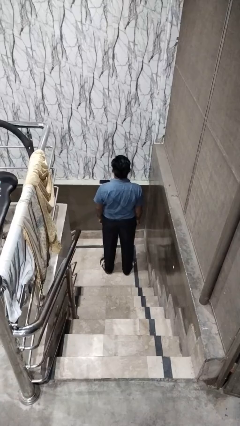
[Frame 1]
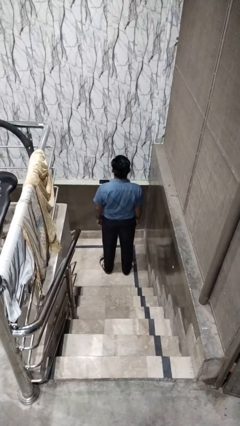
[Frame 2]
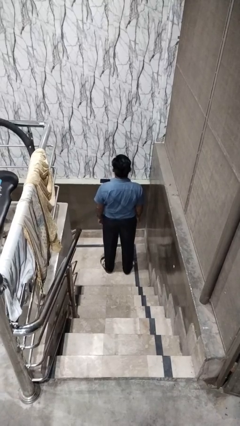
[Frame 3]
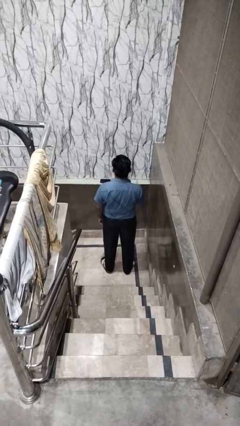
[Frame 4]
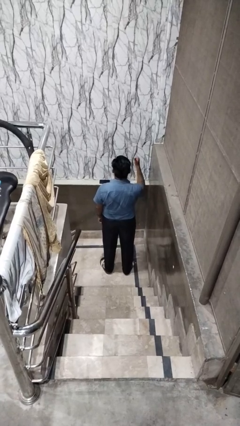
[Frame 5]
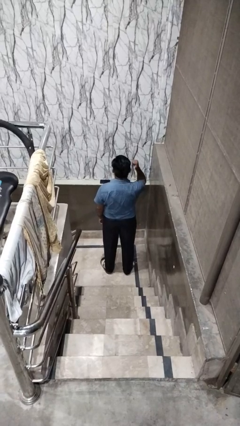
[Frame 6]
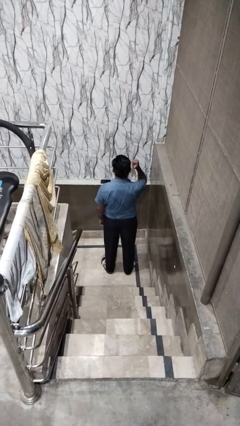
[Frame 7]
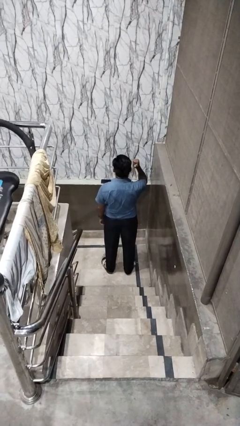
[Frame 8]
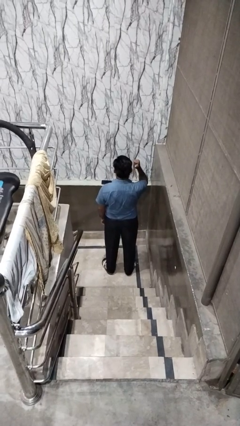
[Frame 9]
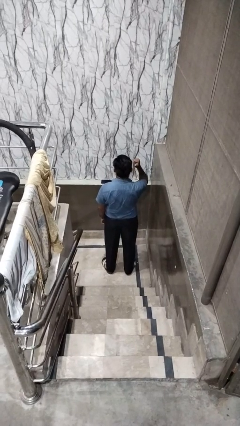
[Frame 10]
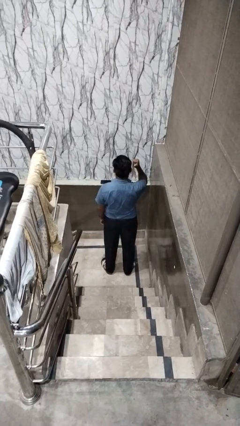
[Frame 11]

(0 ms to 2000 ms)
person gestures behind me

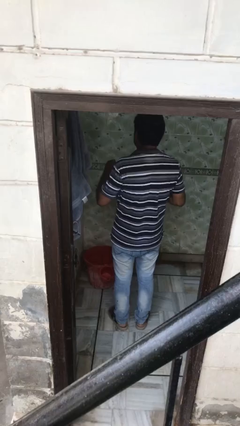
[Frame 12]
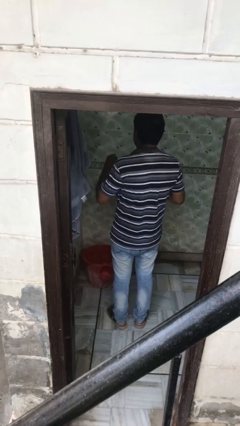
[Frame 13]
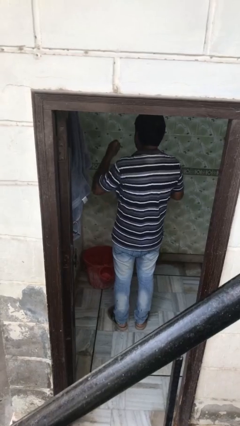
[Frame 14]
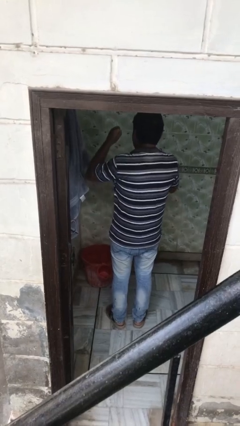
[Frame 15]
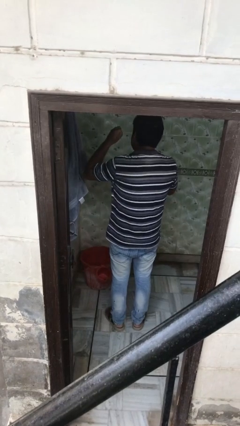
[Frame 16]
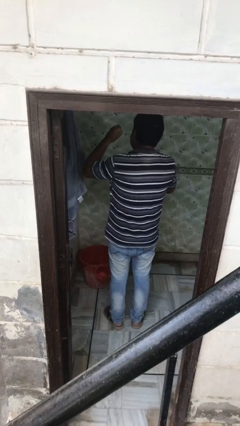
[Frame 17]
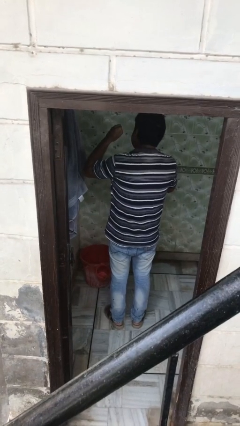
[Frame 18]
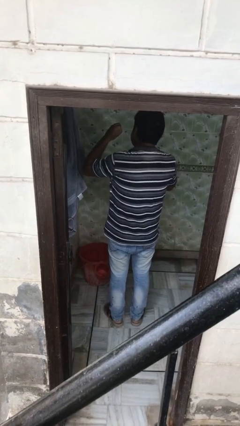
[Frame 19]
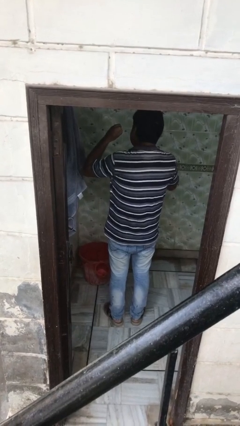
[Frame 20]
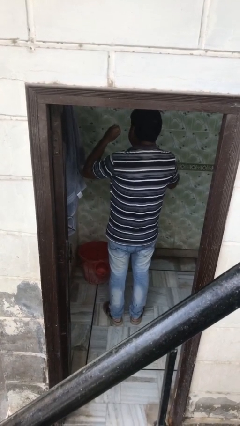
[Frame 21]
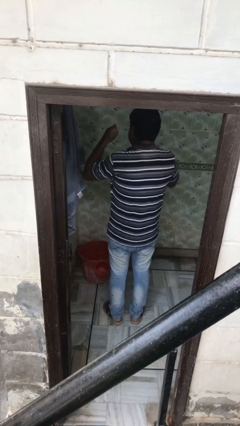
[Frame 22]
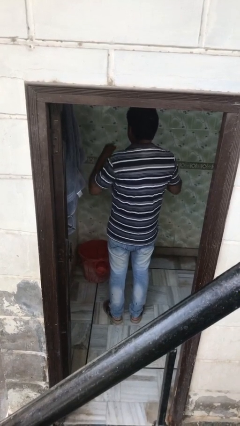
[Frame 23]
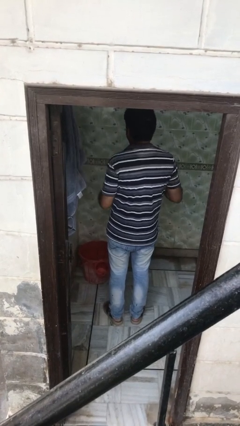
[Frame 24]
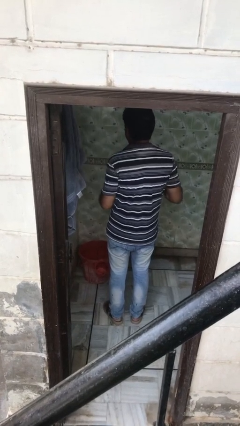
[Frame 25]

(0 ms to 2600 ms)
person flosses

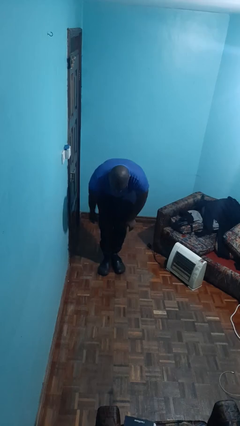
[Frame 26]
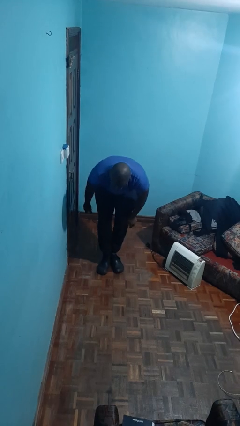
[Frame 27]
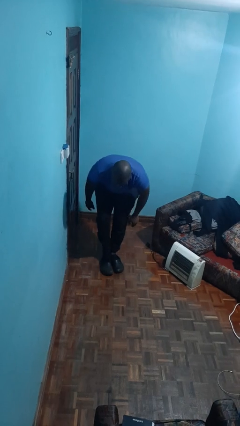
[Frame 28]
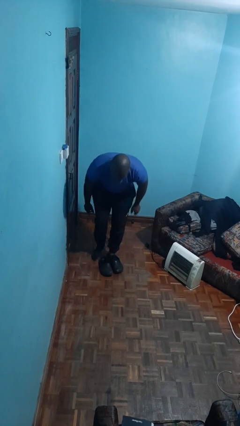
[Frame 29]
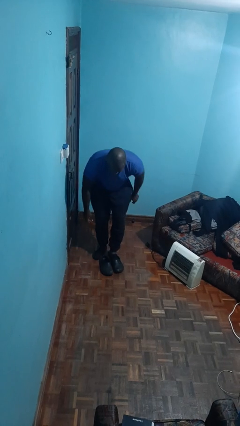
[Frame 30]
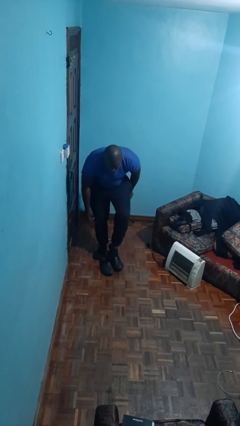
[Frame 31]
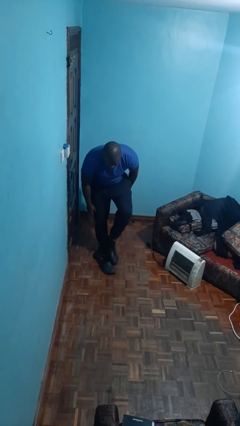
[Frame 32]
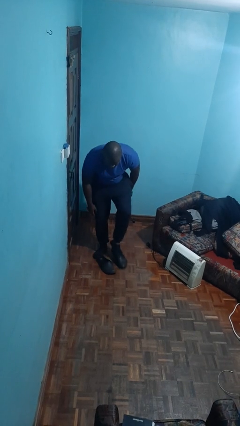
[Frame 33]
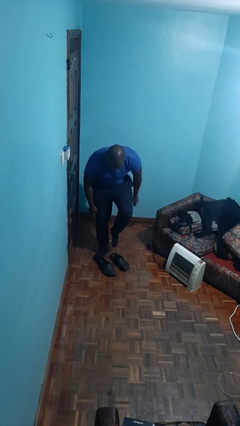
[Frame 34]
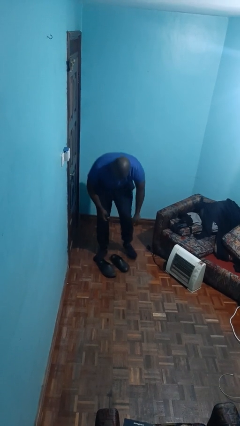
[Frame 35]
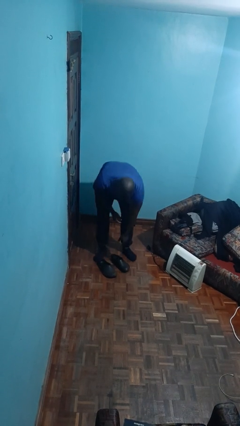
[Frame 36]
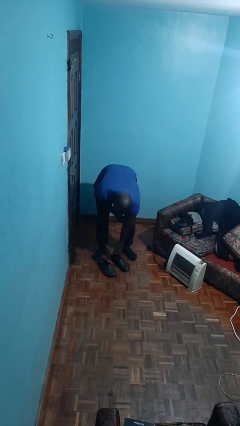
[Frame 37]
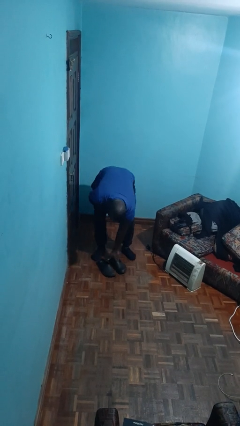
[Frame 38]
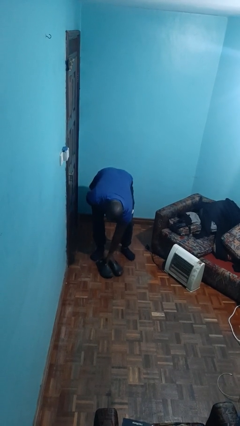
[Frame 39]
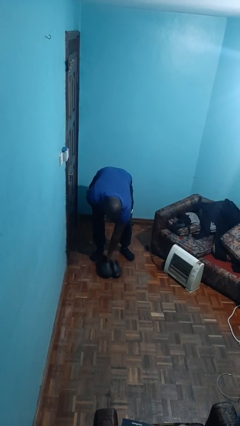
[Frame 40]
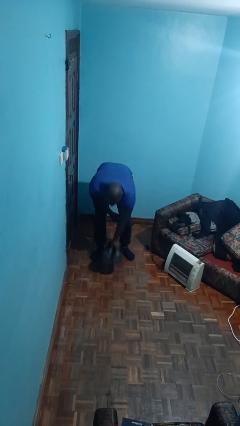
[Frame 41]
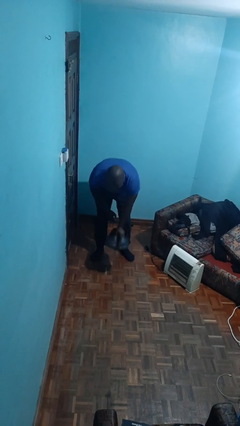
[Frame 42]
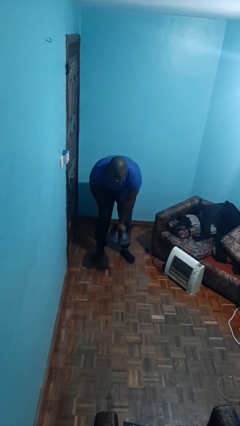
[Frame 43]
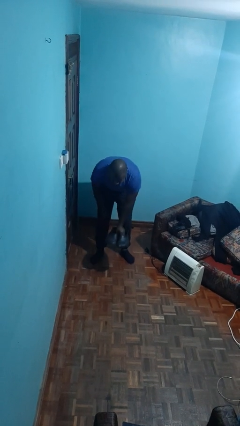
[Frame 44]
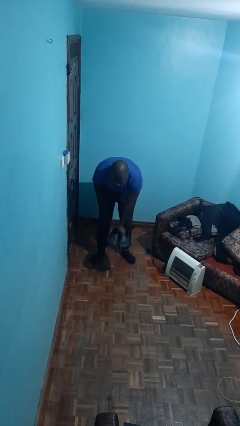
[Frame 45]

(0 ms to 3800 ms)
person takes off shoes

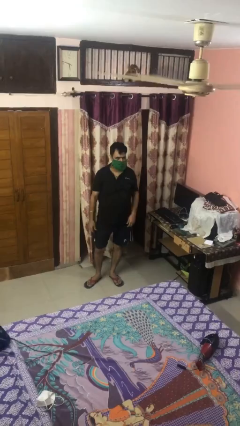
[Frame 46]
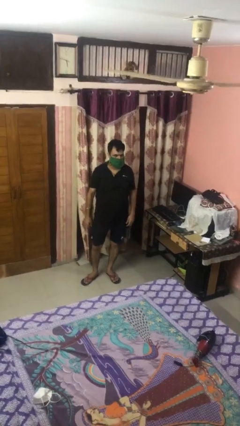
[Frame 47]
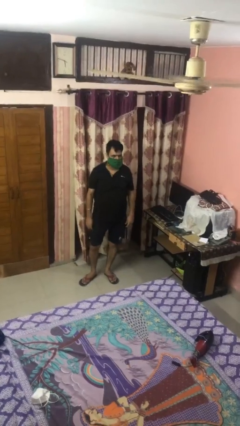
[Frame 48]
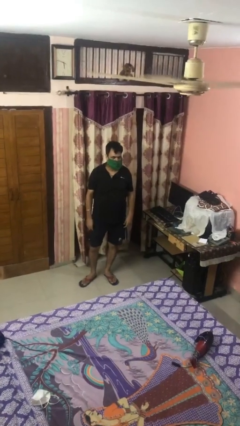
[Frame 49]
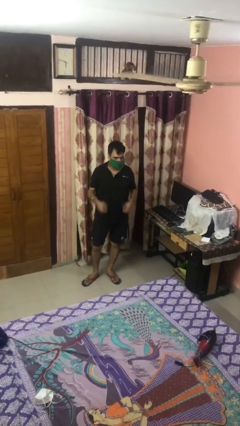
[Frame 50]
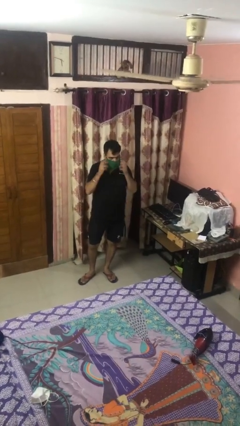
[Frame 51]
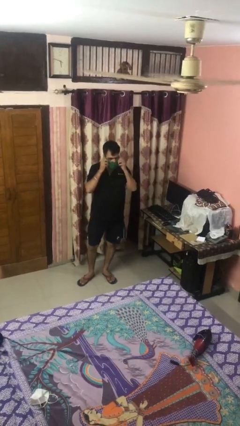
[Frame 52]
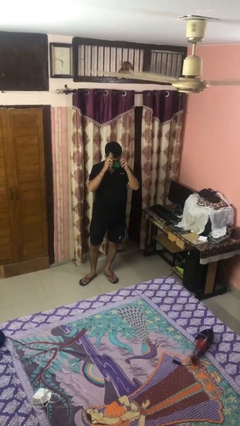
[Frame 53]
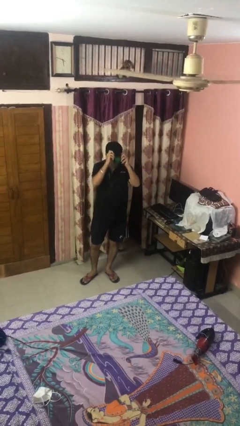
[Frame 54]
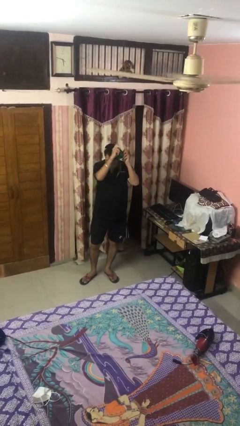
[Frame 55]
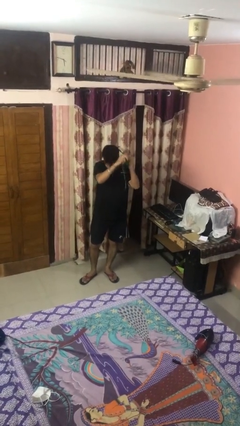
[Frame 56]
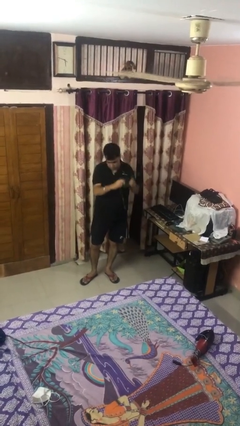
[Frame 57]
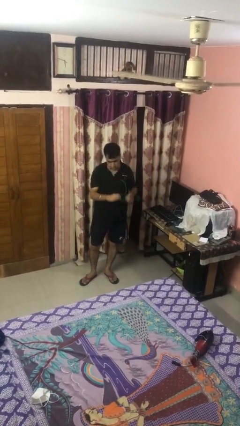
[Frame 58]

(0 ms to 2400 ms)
person takes off facemask

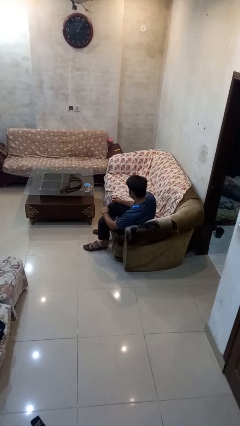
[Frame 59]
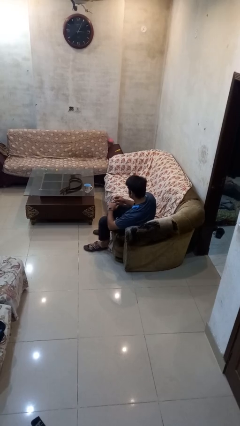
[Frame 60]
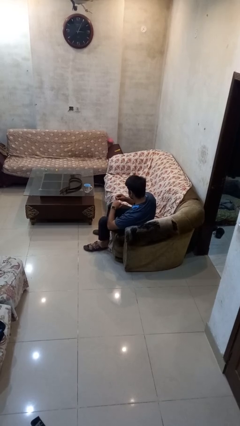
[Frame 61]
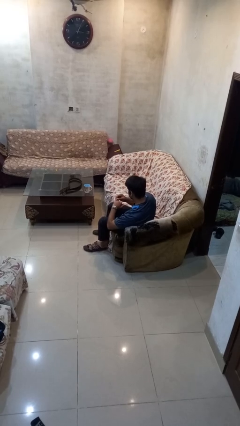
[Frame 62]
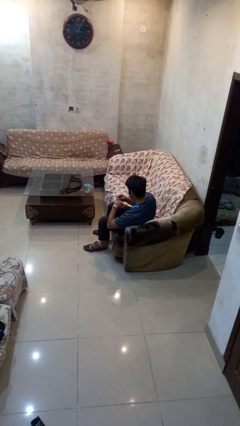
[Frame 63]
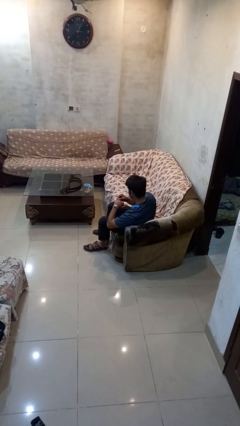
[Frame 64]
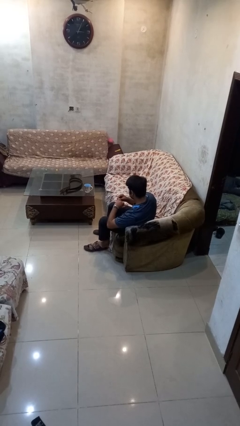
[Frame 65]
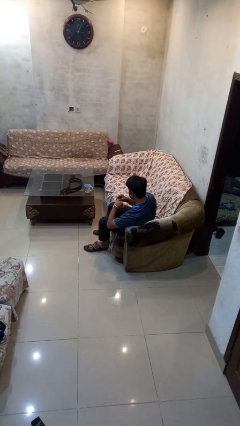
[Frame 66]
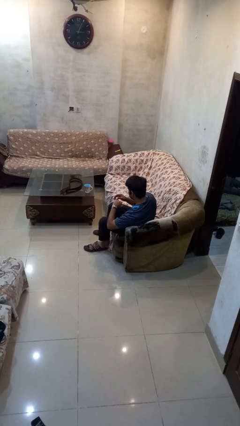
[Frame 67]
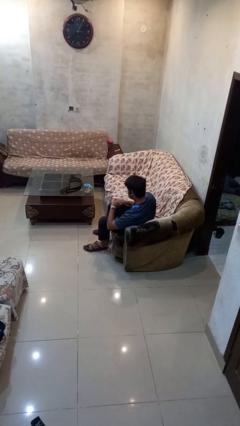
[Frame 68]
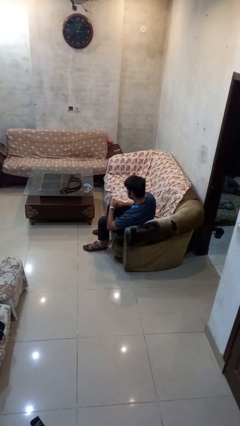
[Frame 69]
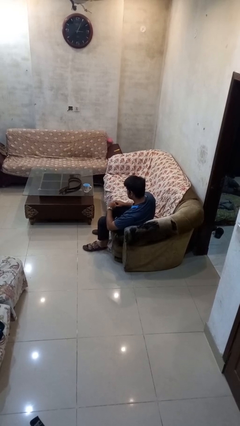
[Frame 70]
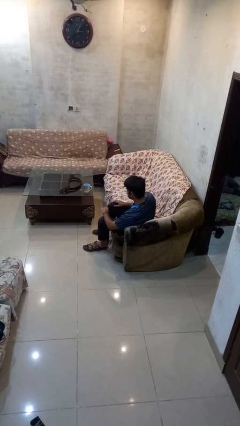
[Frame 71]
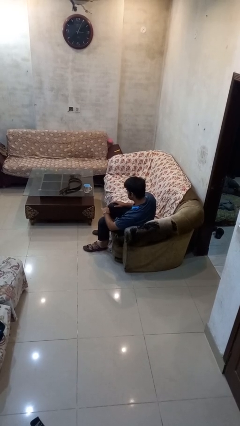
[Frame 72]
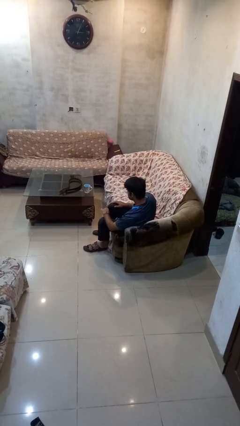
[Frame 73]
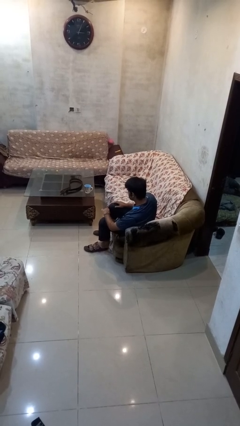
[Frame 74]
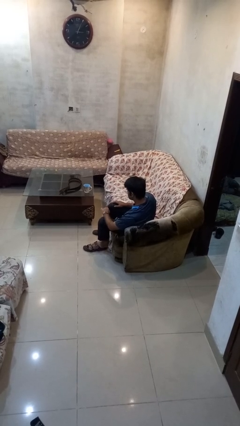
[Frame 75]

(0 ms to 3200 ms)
person puts on ring

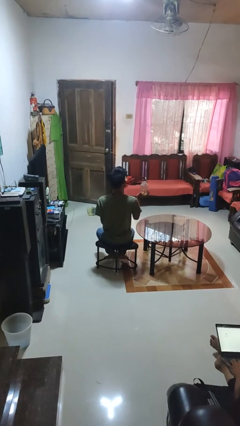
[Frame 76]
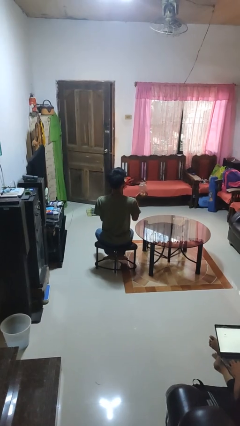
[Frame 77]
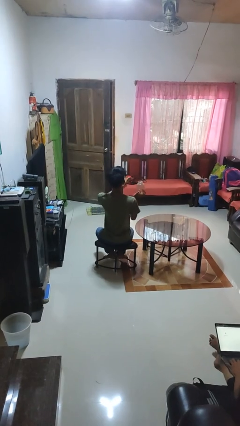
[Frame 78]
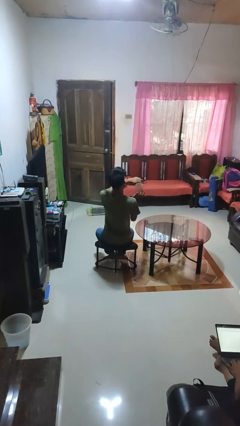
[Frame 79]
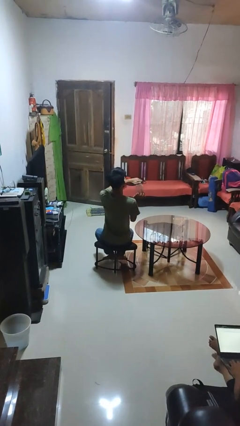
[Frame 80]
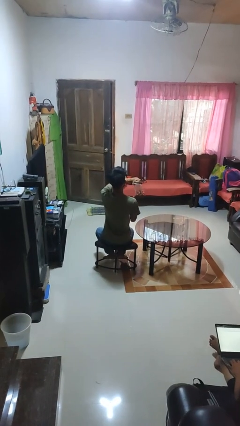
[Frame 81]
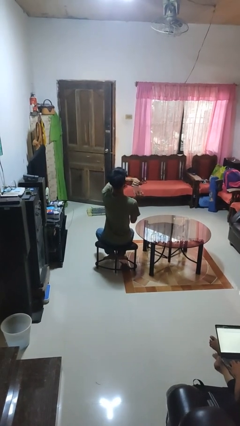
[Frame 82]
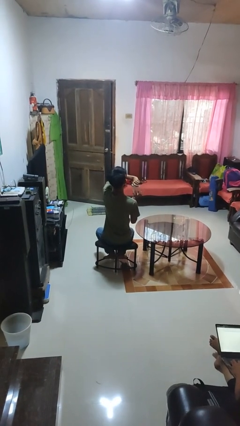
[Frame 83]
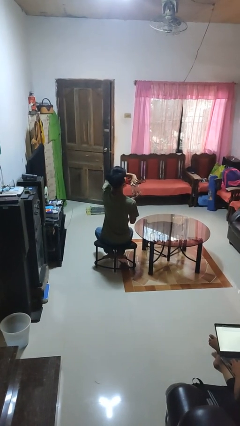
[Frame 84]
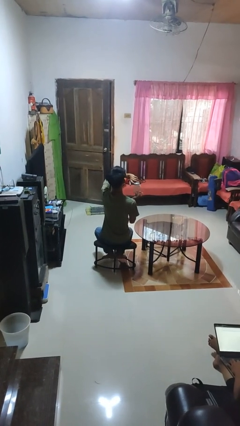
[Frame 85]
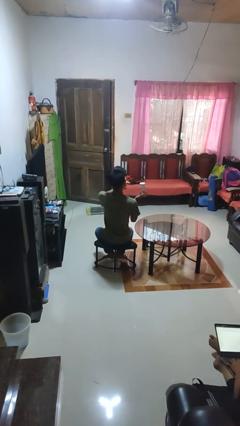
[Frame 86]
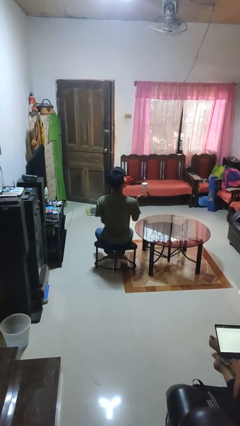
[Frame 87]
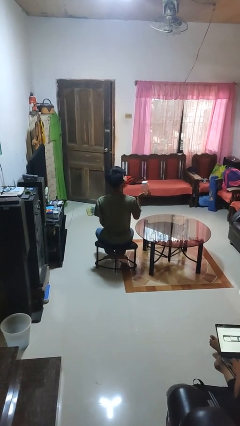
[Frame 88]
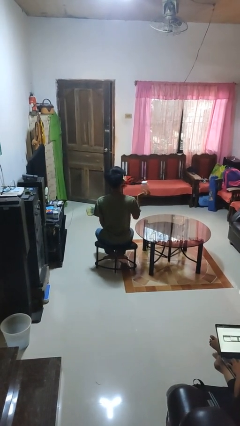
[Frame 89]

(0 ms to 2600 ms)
person closes jar

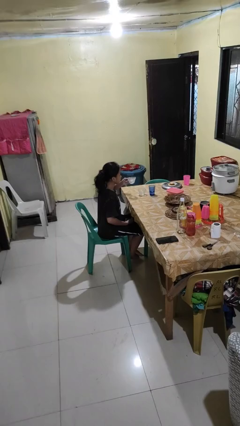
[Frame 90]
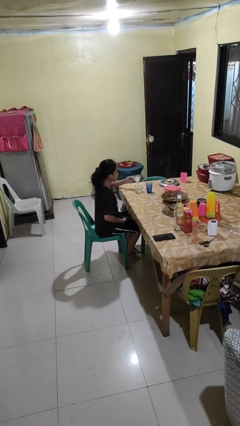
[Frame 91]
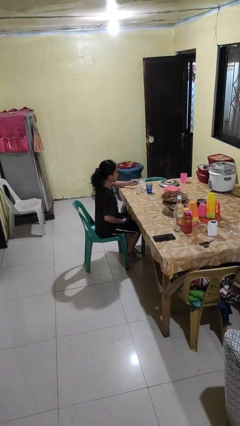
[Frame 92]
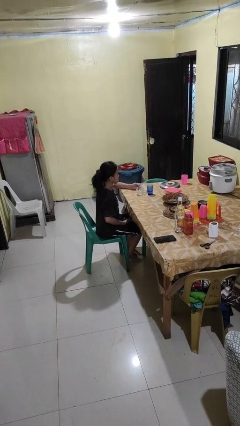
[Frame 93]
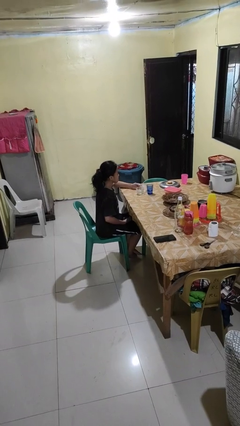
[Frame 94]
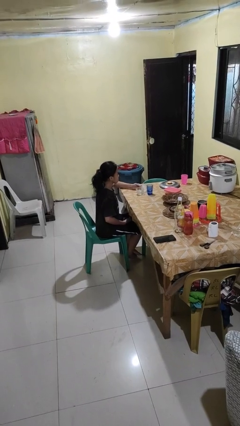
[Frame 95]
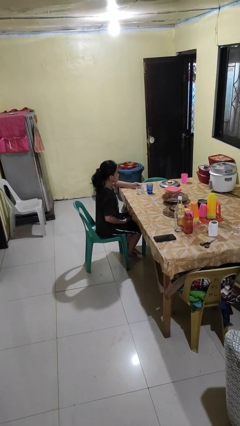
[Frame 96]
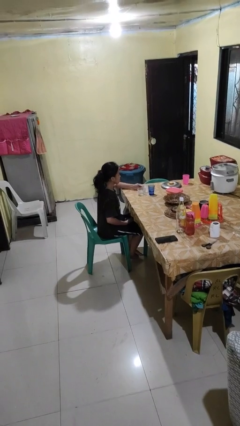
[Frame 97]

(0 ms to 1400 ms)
person puts down object on table
